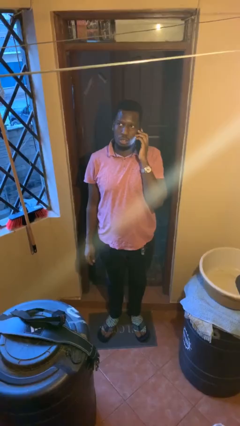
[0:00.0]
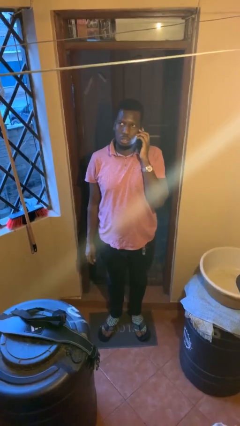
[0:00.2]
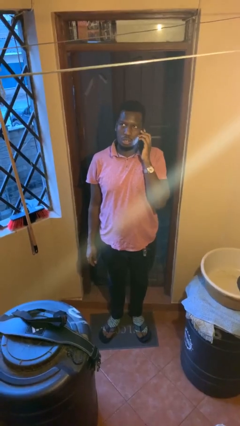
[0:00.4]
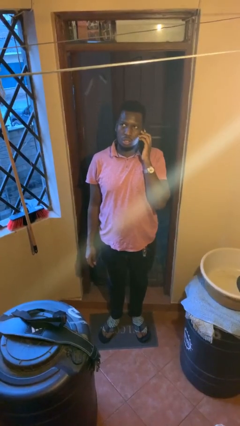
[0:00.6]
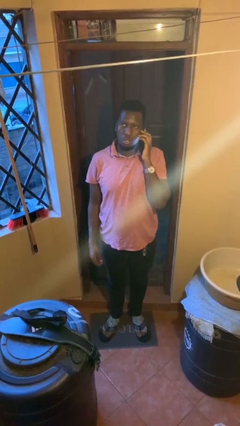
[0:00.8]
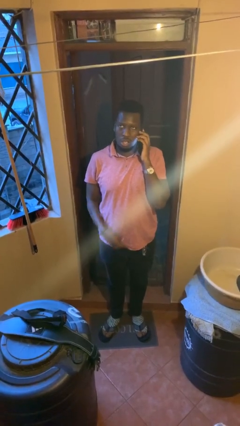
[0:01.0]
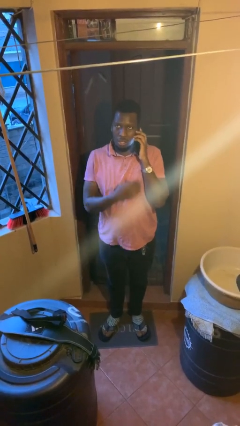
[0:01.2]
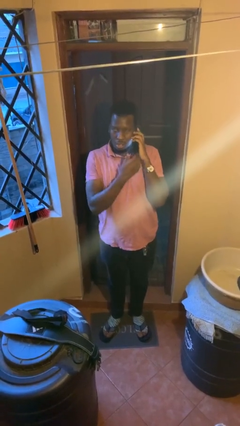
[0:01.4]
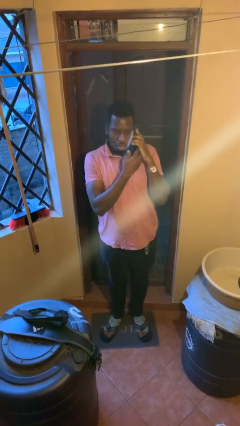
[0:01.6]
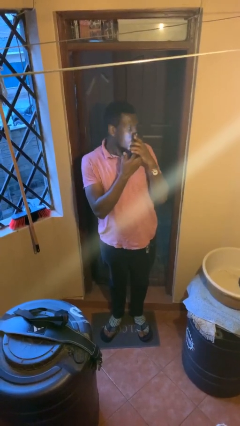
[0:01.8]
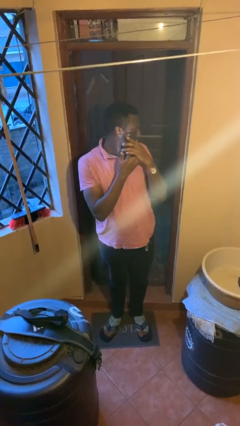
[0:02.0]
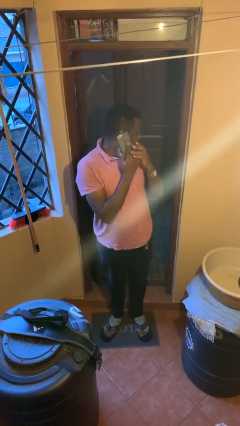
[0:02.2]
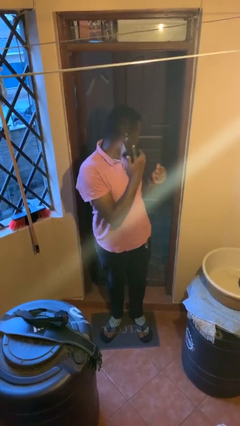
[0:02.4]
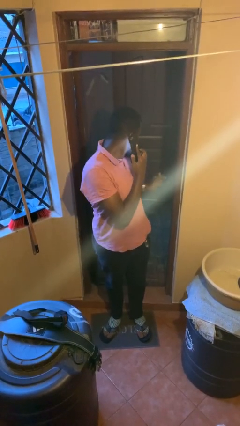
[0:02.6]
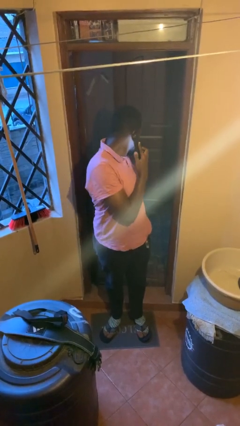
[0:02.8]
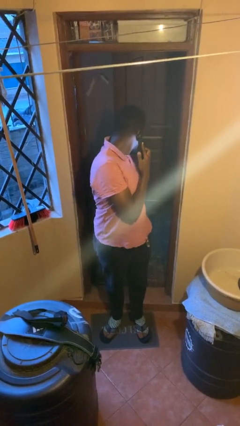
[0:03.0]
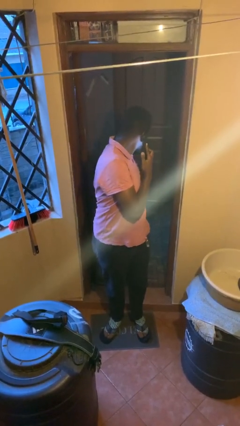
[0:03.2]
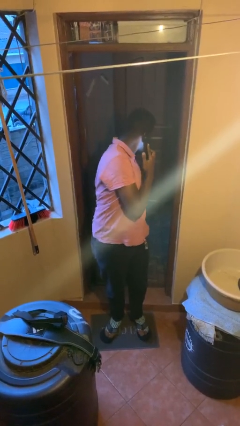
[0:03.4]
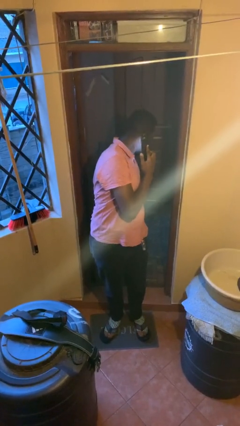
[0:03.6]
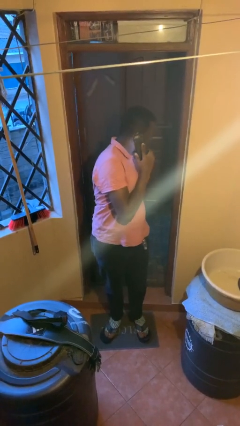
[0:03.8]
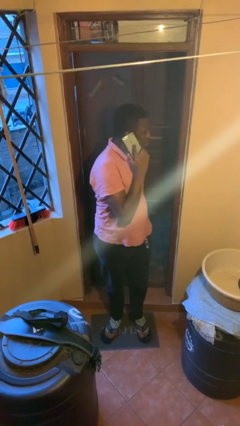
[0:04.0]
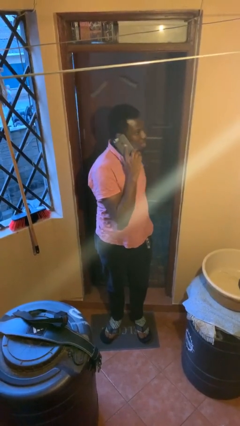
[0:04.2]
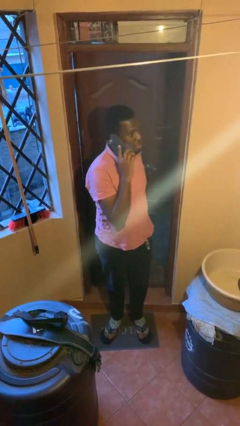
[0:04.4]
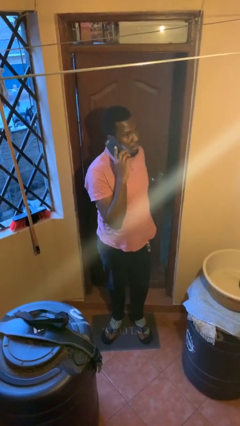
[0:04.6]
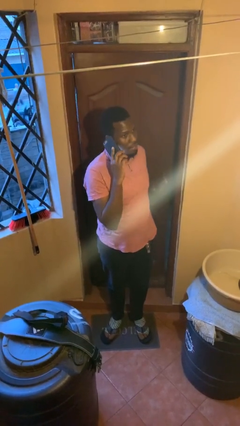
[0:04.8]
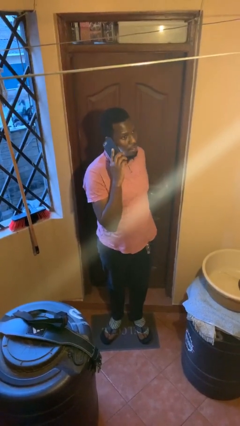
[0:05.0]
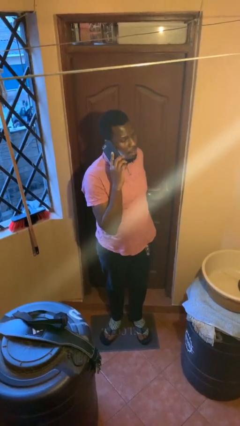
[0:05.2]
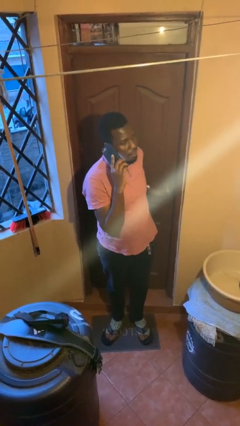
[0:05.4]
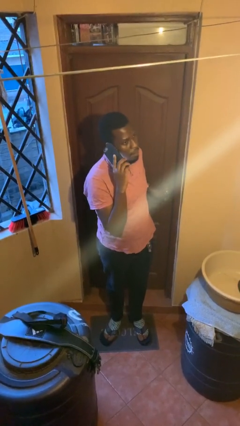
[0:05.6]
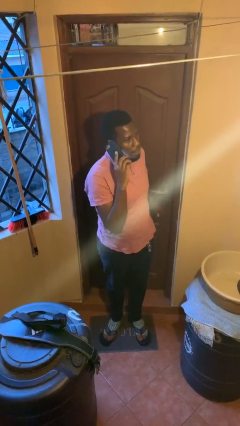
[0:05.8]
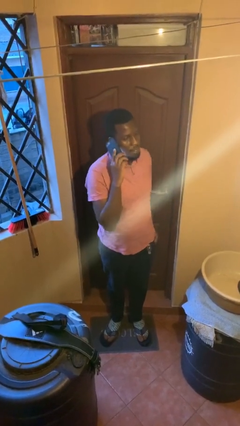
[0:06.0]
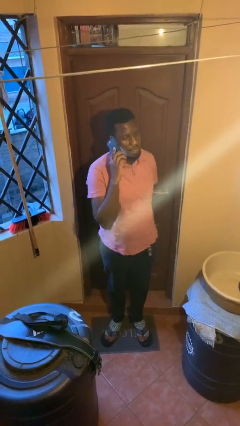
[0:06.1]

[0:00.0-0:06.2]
person closes facility door

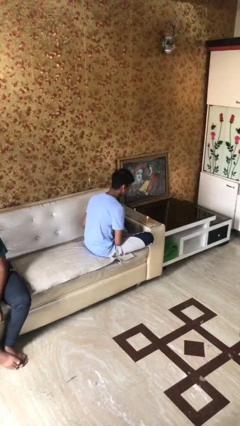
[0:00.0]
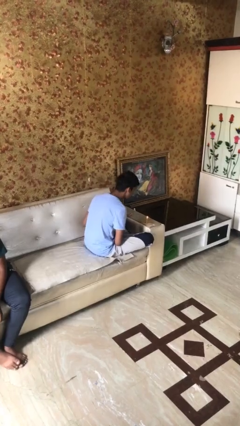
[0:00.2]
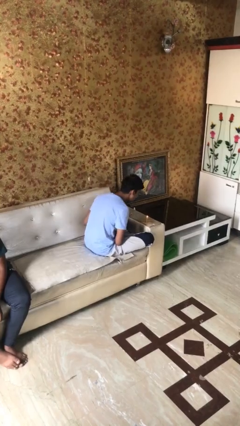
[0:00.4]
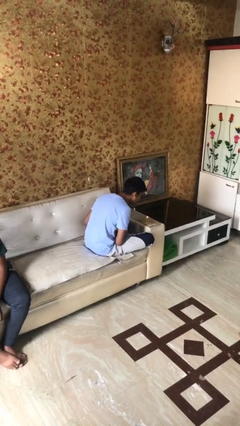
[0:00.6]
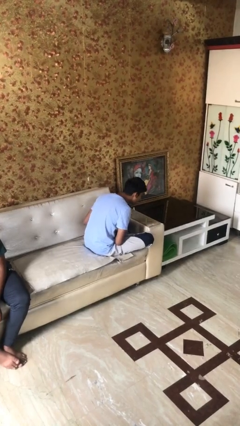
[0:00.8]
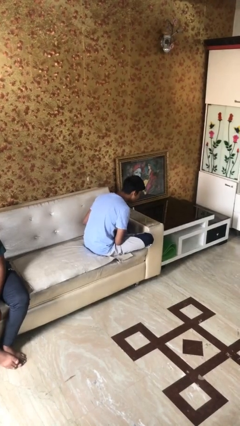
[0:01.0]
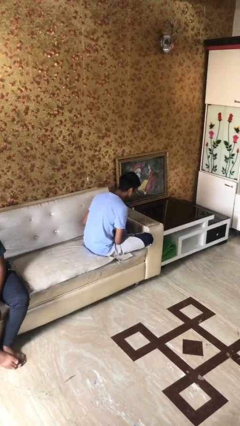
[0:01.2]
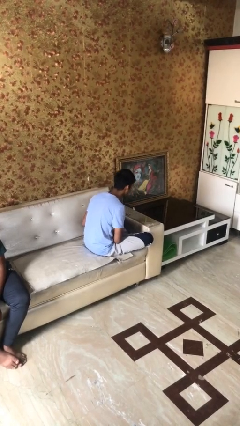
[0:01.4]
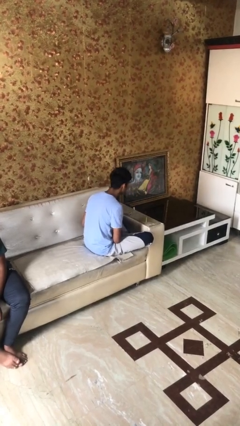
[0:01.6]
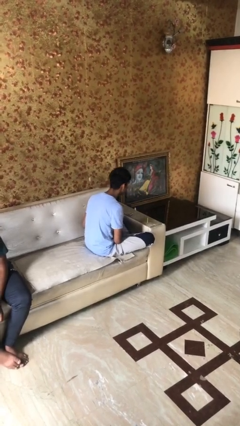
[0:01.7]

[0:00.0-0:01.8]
person extinguishes candle

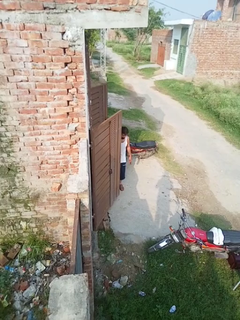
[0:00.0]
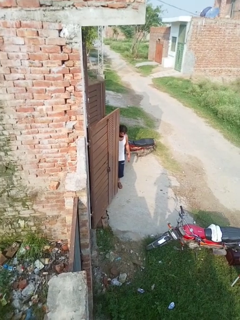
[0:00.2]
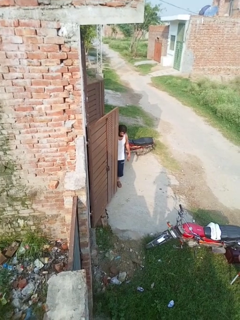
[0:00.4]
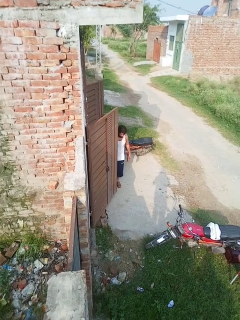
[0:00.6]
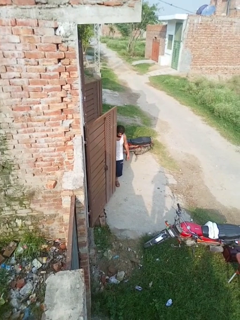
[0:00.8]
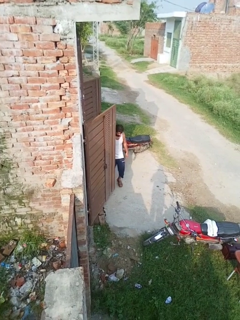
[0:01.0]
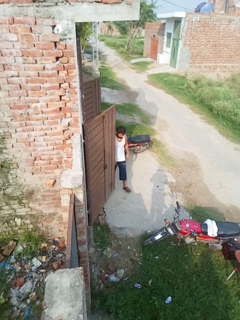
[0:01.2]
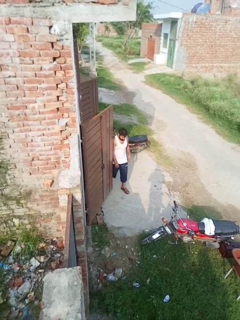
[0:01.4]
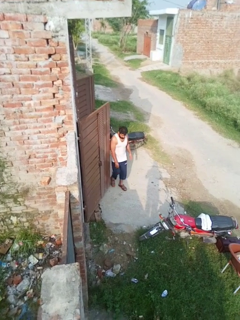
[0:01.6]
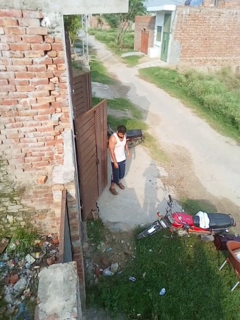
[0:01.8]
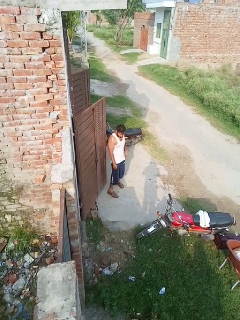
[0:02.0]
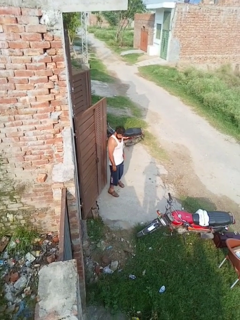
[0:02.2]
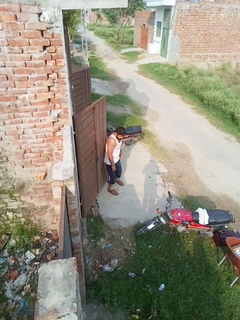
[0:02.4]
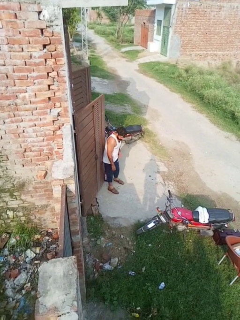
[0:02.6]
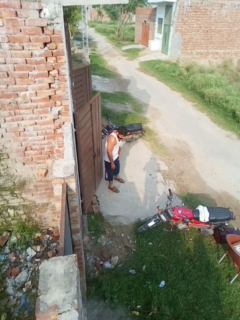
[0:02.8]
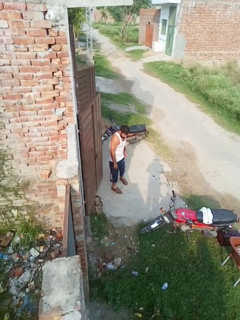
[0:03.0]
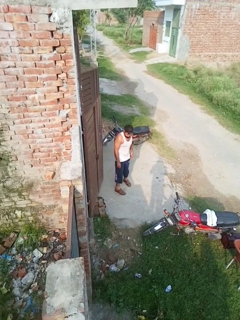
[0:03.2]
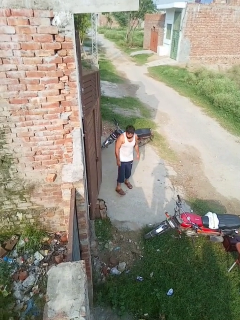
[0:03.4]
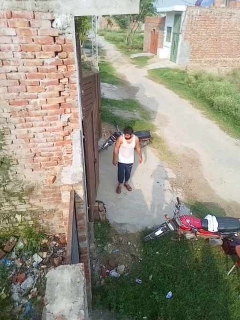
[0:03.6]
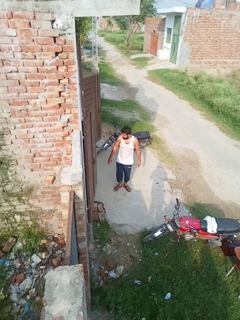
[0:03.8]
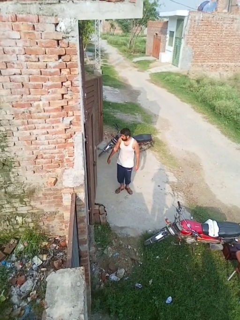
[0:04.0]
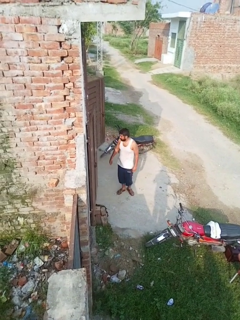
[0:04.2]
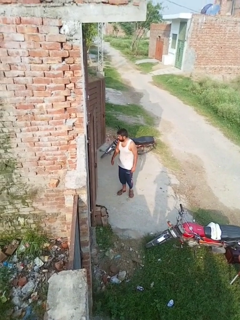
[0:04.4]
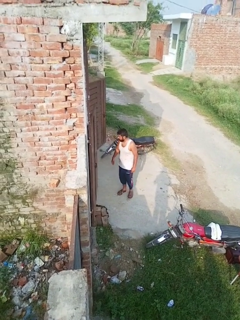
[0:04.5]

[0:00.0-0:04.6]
person closes door with hip

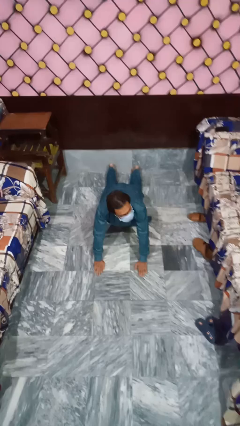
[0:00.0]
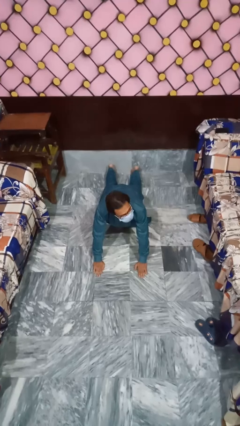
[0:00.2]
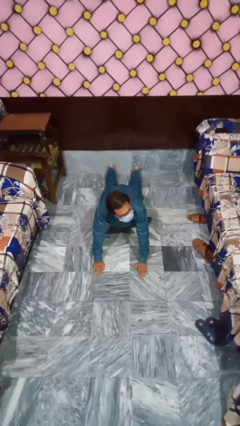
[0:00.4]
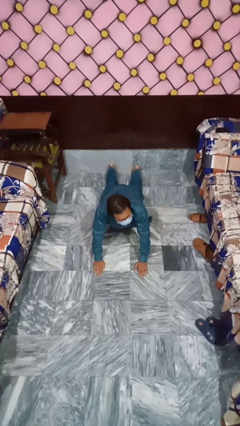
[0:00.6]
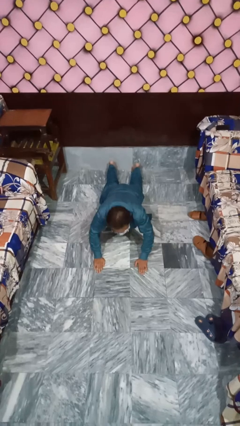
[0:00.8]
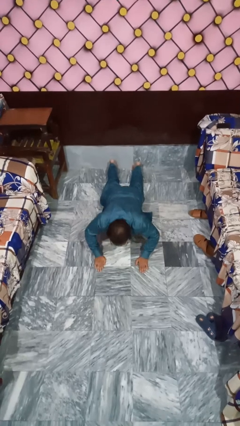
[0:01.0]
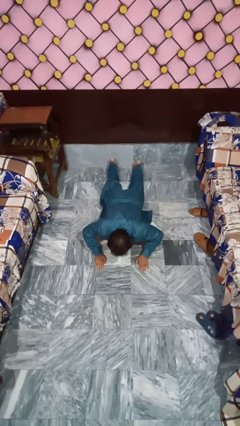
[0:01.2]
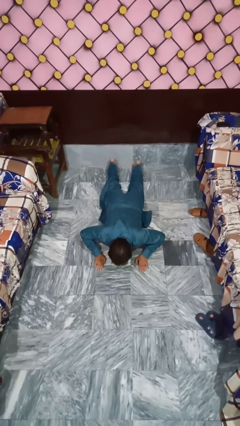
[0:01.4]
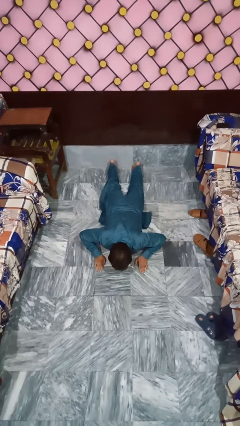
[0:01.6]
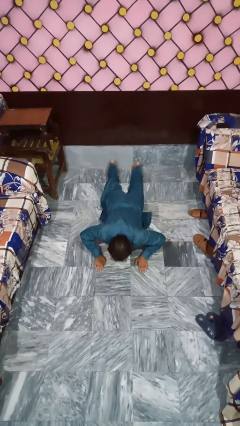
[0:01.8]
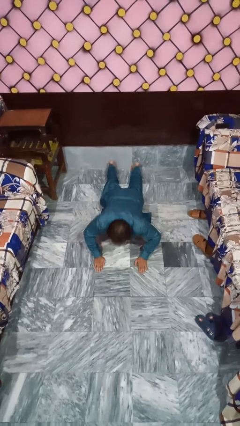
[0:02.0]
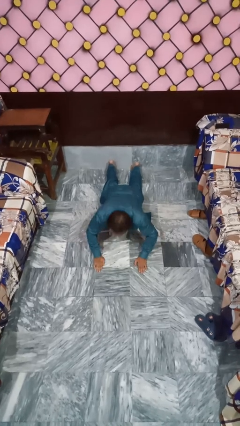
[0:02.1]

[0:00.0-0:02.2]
person exercises with pushup

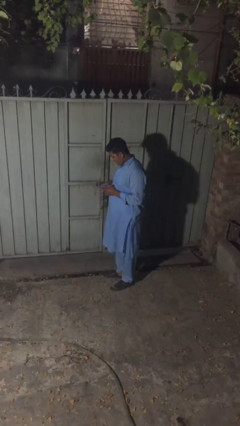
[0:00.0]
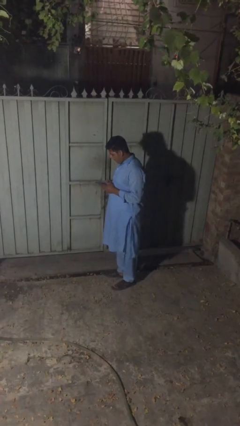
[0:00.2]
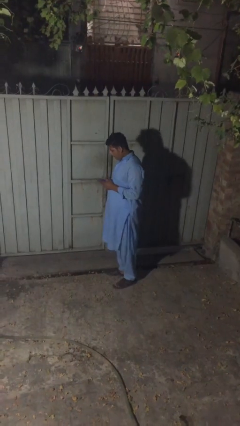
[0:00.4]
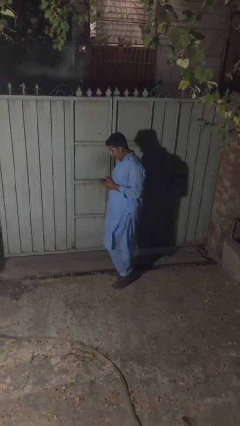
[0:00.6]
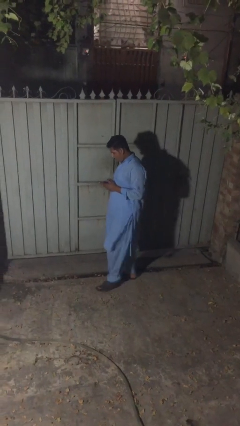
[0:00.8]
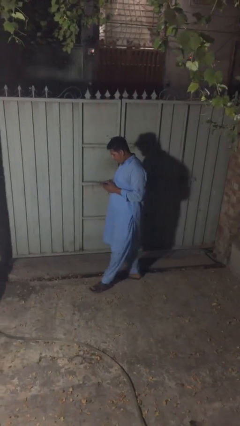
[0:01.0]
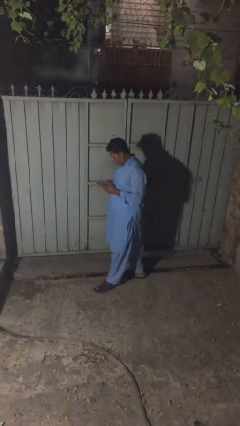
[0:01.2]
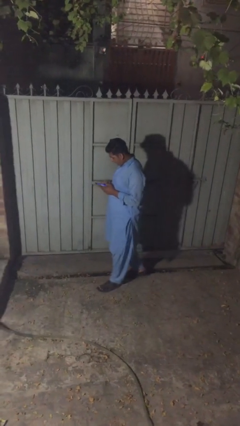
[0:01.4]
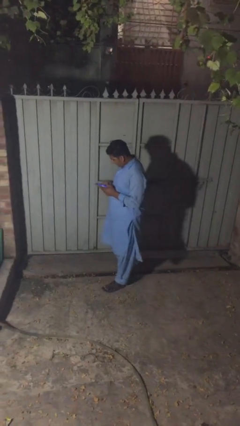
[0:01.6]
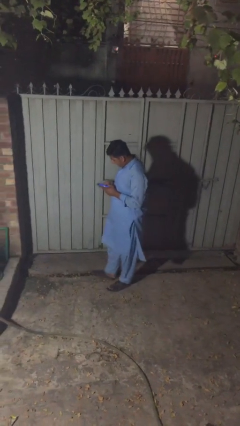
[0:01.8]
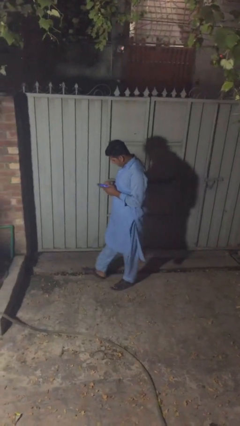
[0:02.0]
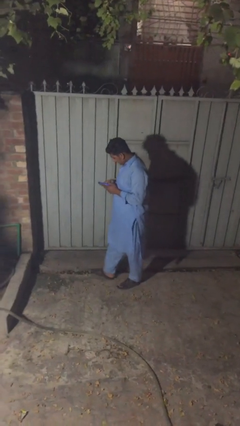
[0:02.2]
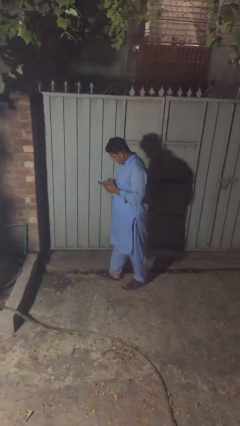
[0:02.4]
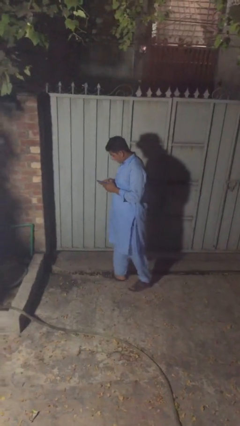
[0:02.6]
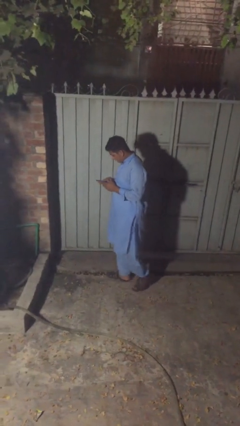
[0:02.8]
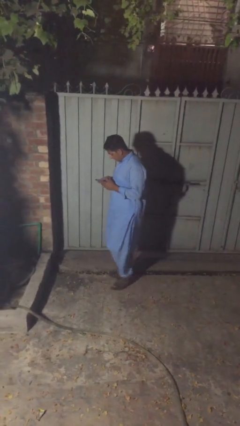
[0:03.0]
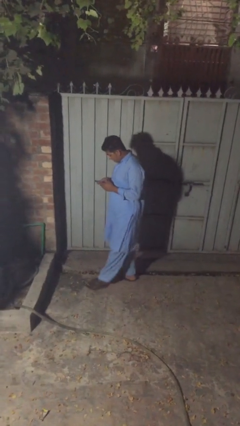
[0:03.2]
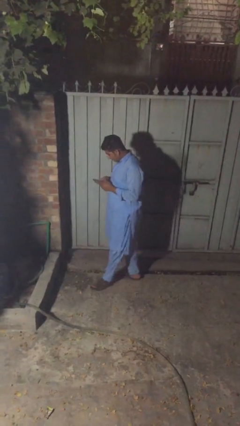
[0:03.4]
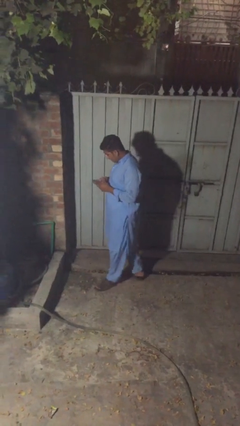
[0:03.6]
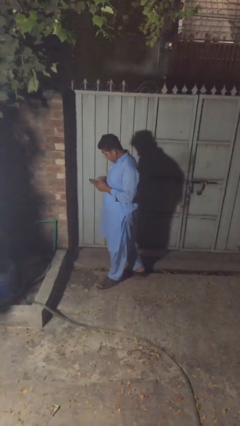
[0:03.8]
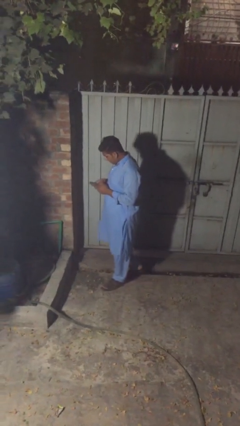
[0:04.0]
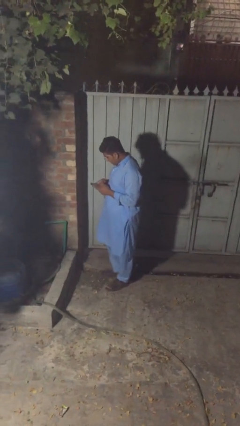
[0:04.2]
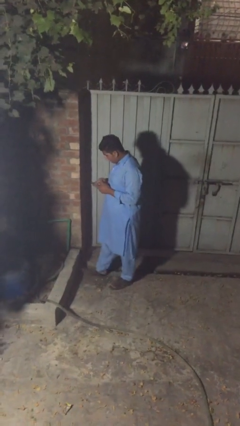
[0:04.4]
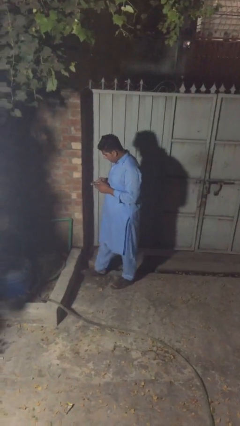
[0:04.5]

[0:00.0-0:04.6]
person texts on phone
